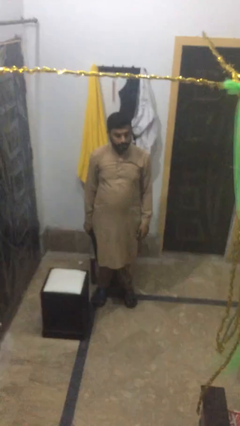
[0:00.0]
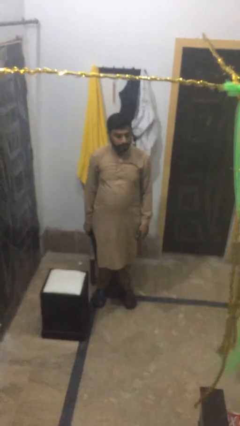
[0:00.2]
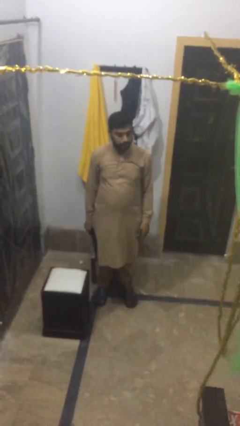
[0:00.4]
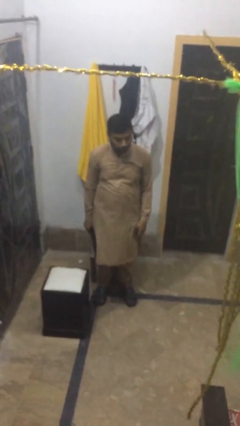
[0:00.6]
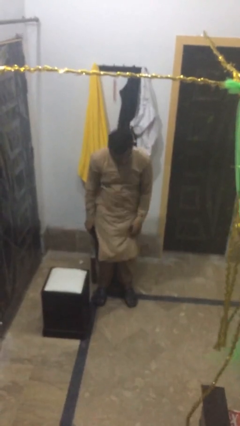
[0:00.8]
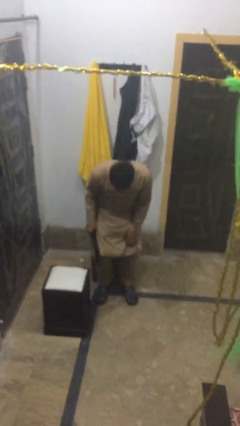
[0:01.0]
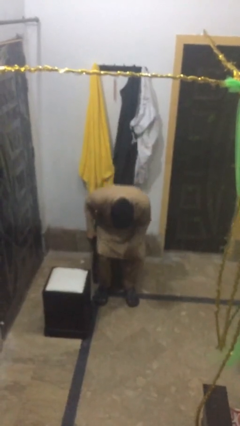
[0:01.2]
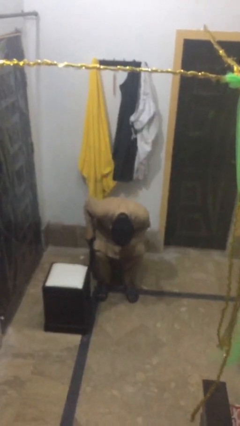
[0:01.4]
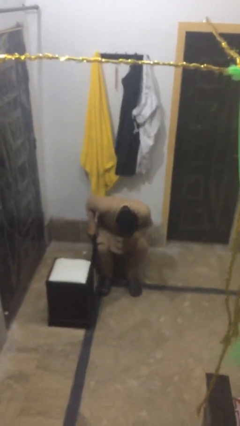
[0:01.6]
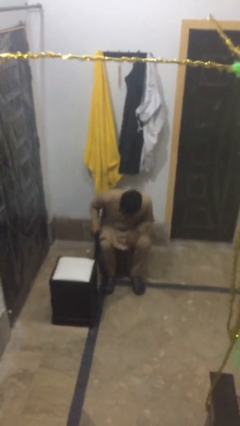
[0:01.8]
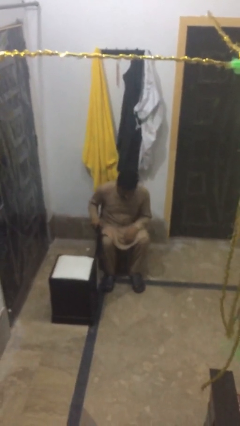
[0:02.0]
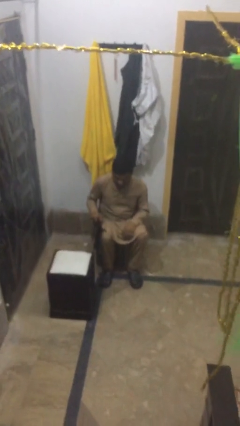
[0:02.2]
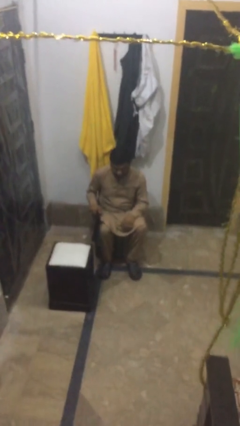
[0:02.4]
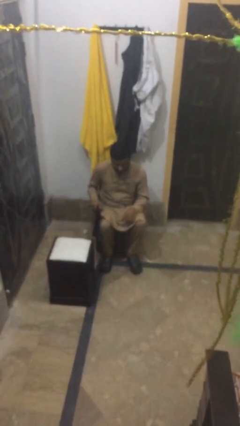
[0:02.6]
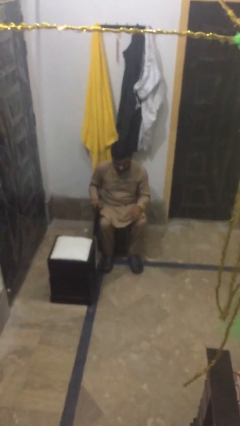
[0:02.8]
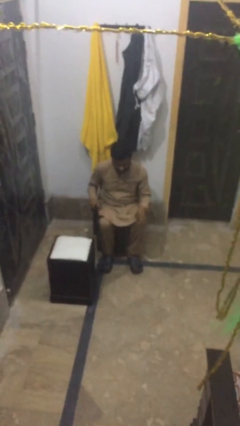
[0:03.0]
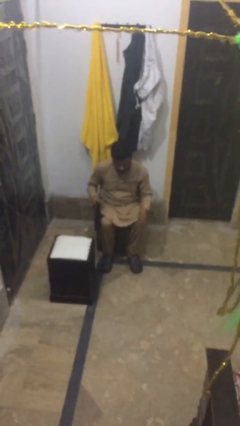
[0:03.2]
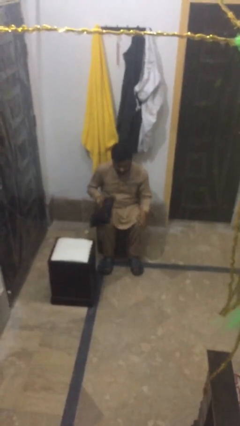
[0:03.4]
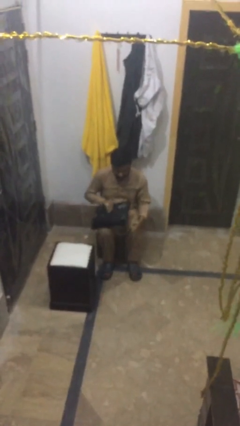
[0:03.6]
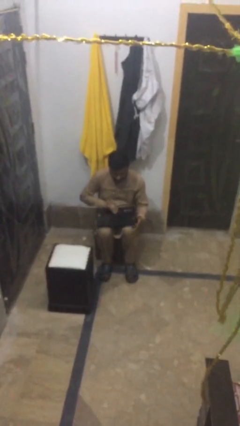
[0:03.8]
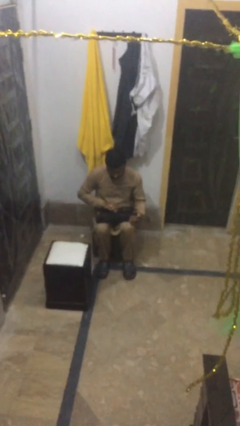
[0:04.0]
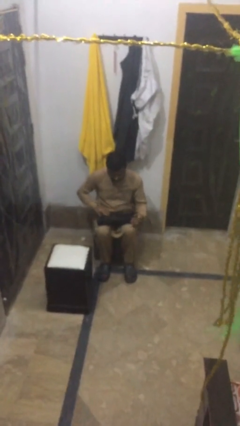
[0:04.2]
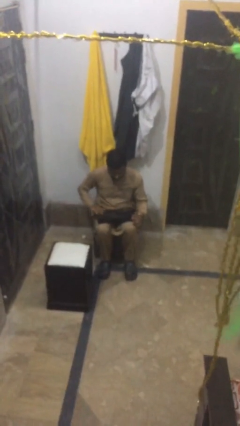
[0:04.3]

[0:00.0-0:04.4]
person sits down

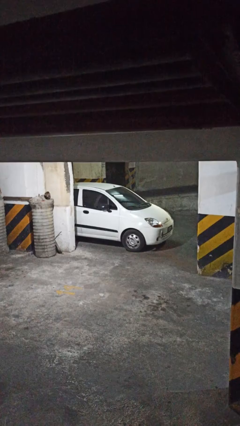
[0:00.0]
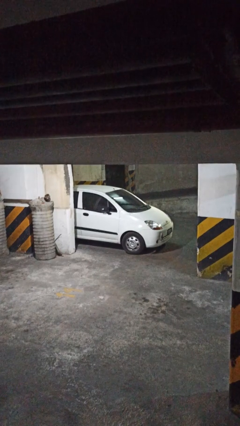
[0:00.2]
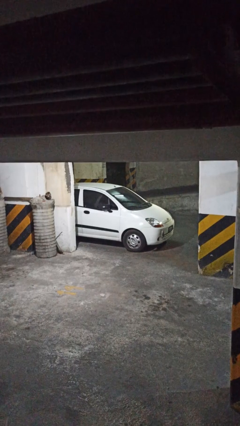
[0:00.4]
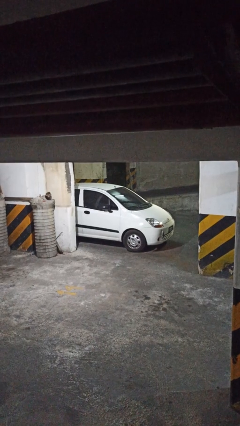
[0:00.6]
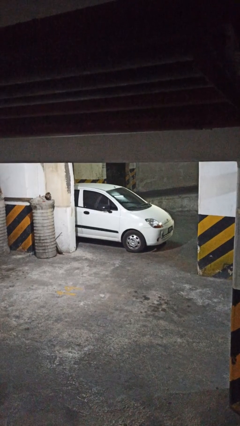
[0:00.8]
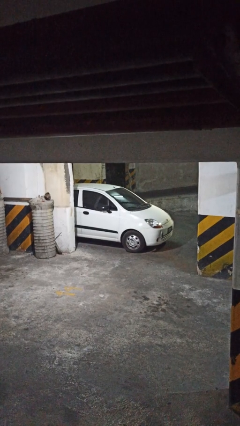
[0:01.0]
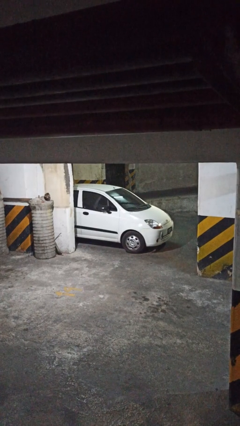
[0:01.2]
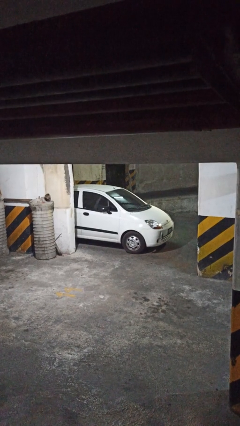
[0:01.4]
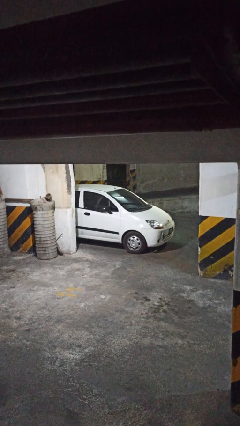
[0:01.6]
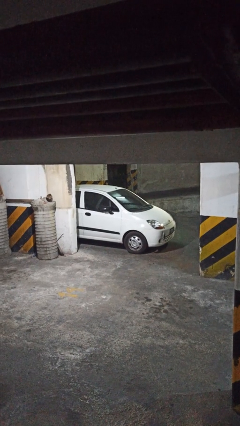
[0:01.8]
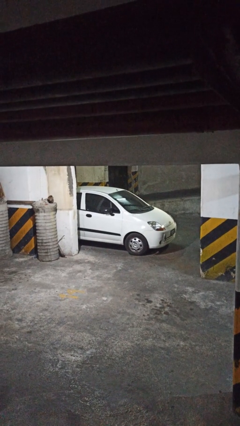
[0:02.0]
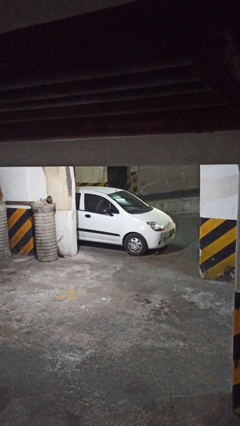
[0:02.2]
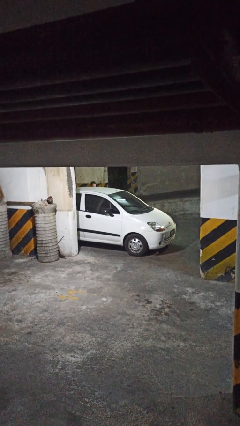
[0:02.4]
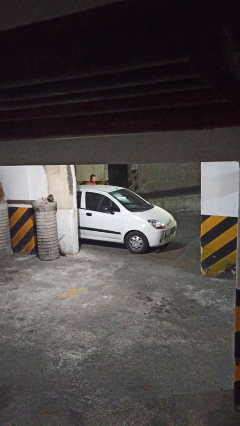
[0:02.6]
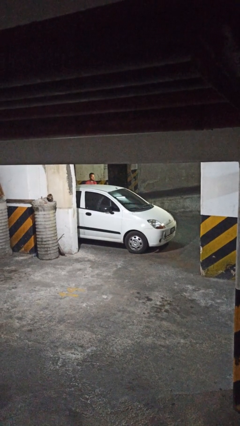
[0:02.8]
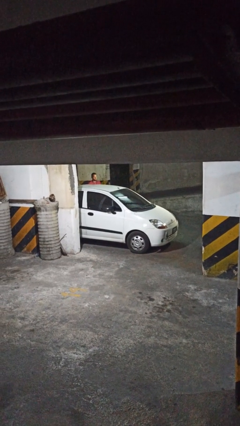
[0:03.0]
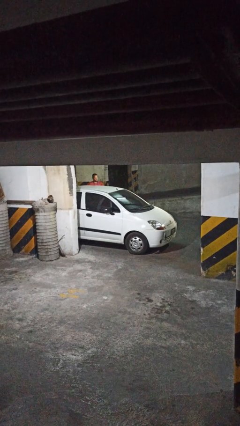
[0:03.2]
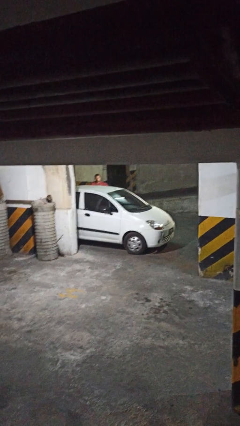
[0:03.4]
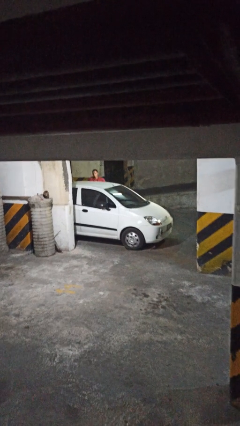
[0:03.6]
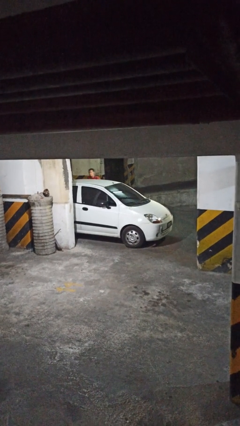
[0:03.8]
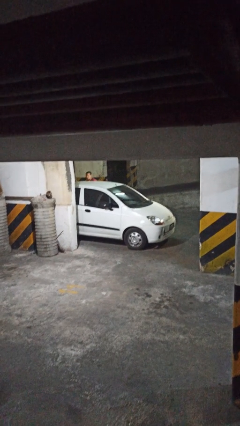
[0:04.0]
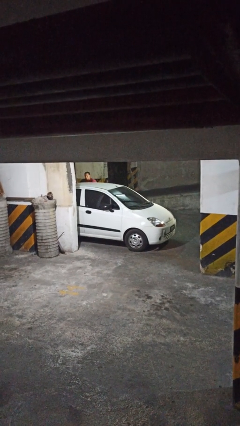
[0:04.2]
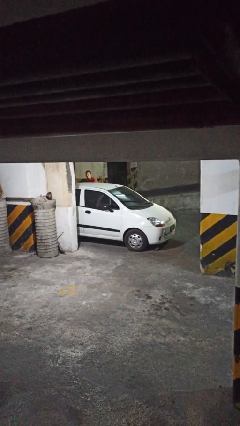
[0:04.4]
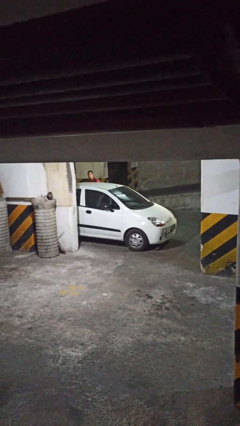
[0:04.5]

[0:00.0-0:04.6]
car drops off person

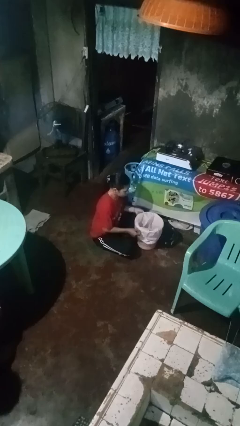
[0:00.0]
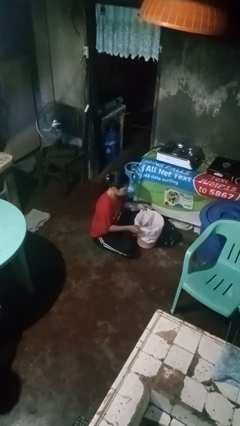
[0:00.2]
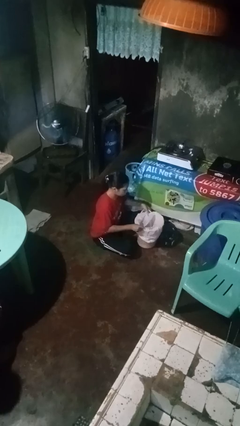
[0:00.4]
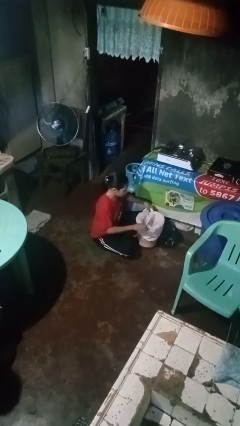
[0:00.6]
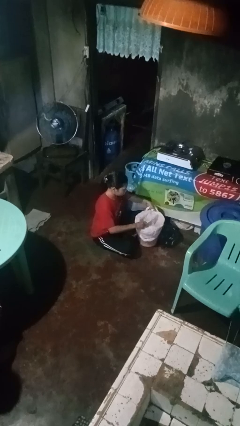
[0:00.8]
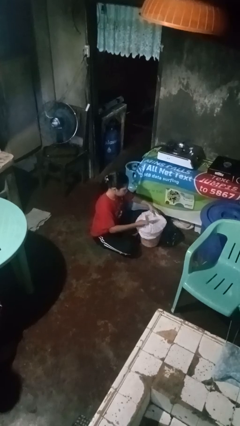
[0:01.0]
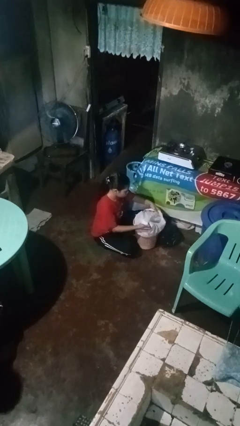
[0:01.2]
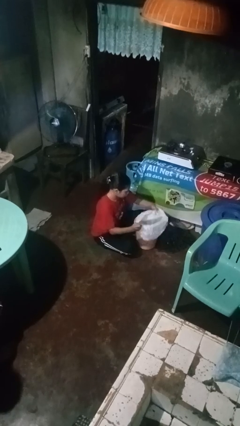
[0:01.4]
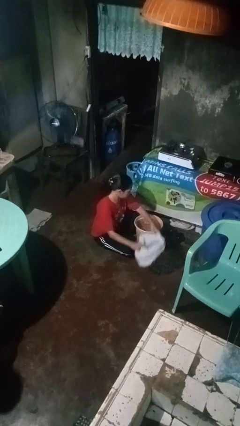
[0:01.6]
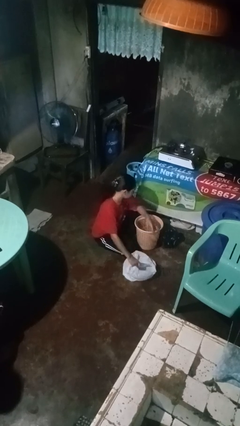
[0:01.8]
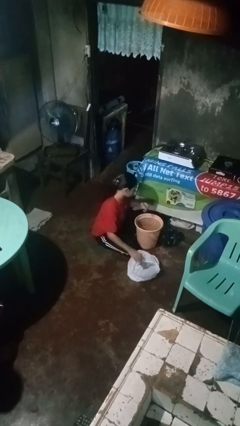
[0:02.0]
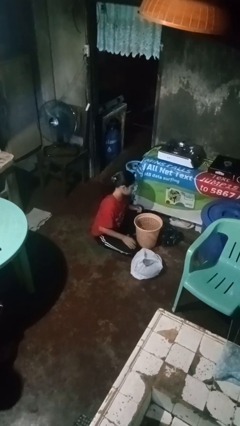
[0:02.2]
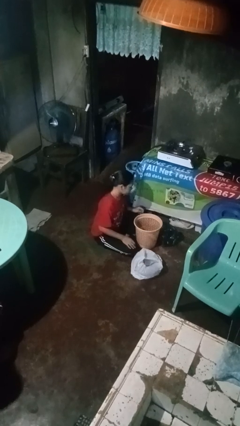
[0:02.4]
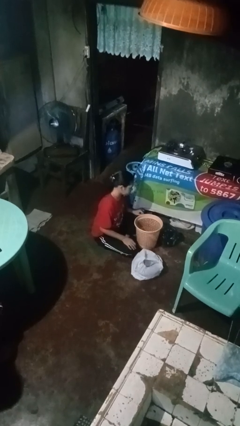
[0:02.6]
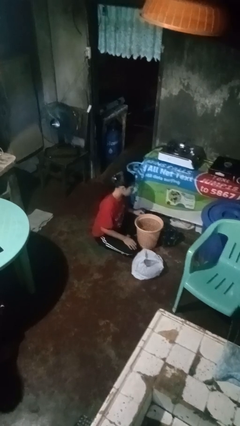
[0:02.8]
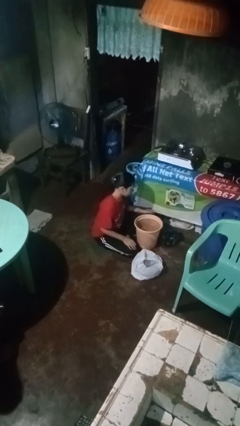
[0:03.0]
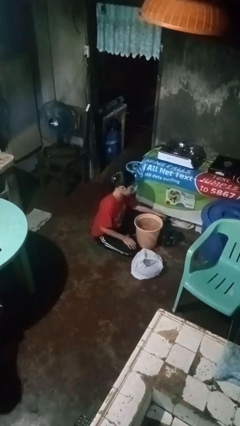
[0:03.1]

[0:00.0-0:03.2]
person removes trashbag from trashcan

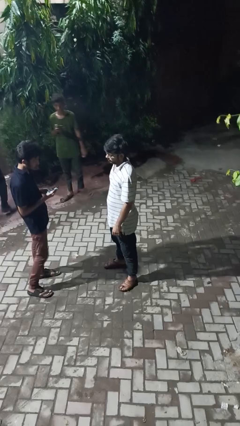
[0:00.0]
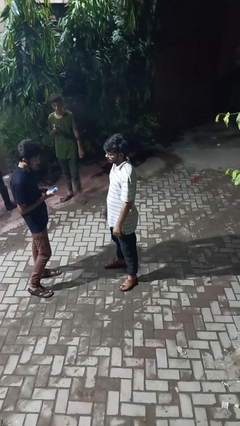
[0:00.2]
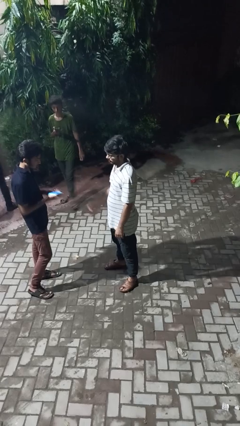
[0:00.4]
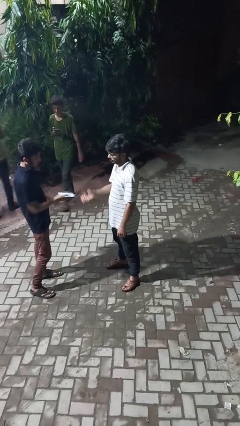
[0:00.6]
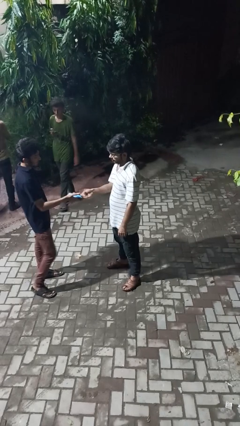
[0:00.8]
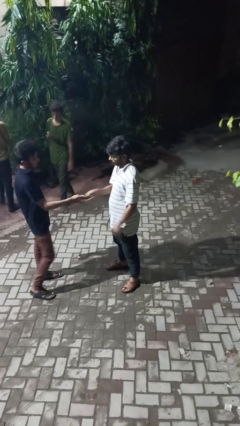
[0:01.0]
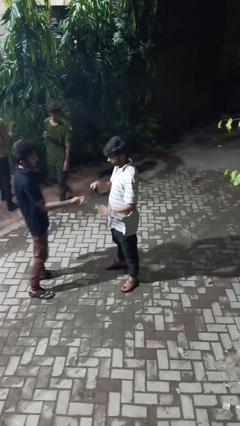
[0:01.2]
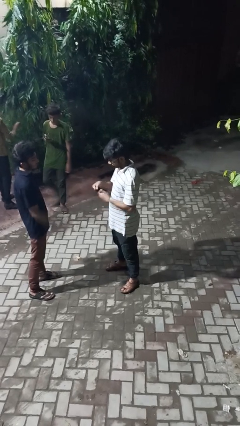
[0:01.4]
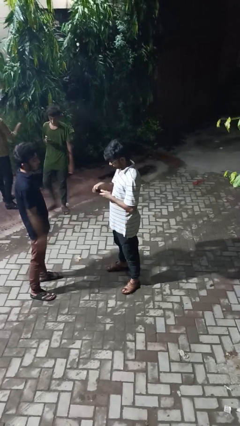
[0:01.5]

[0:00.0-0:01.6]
person transfers object to person

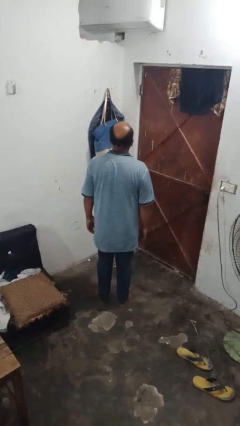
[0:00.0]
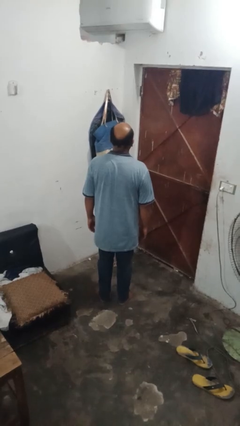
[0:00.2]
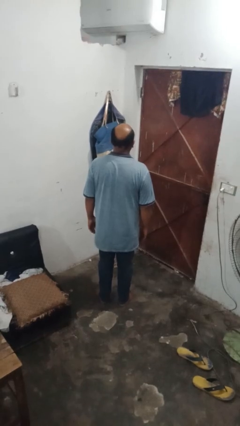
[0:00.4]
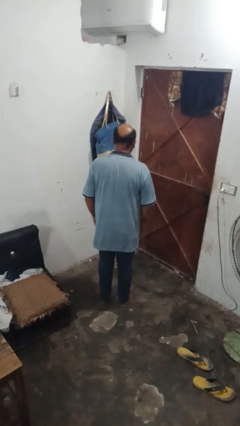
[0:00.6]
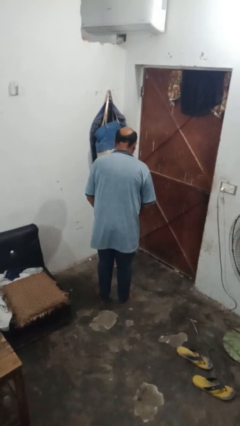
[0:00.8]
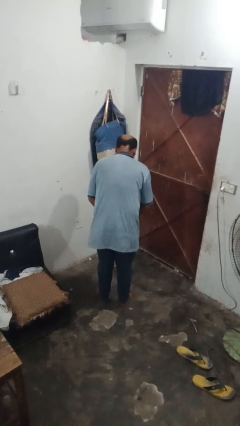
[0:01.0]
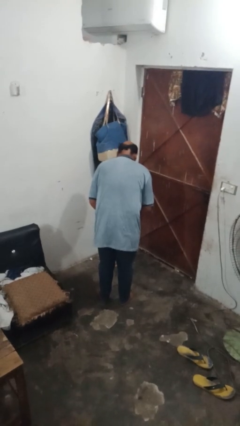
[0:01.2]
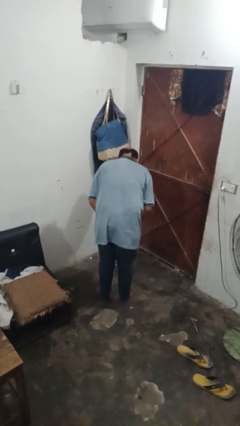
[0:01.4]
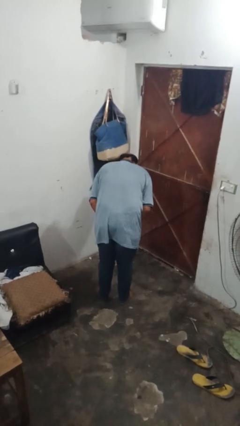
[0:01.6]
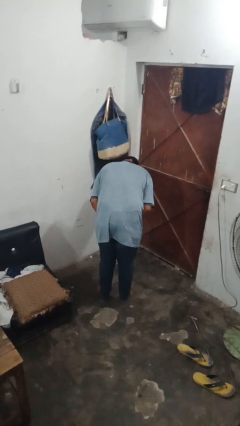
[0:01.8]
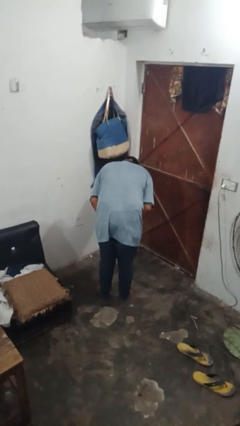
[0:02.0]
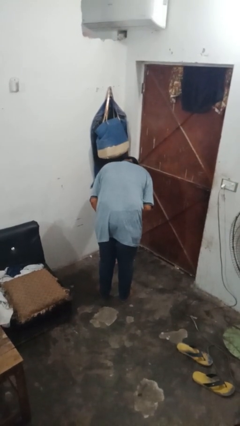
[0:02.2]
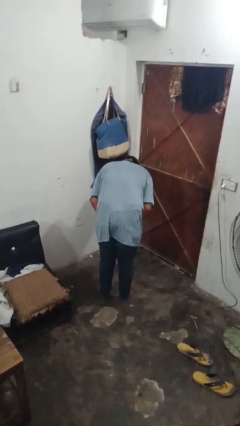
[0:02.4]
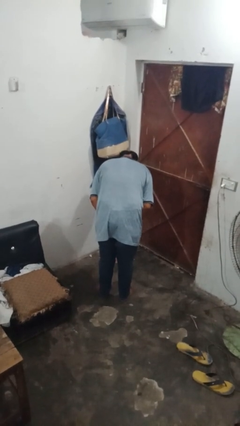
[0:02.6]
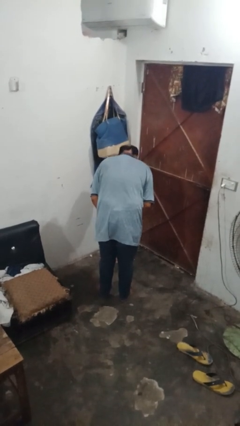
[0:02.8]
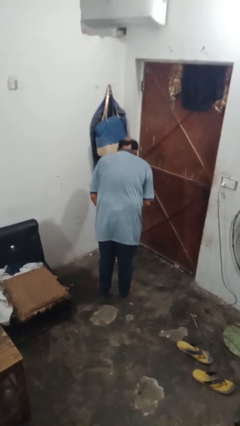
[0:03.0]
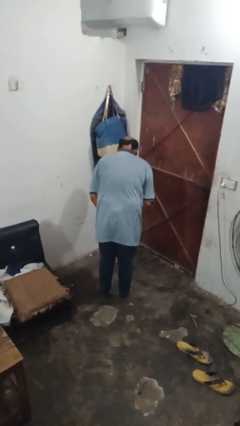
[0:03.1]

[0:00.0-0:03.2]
person bows

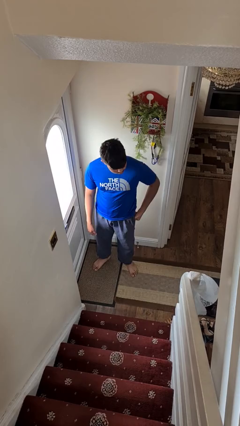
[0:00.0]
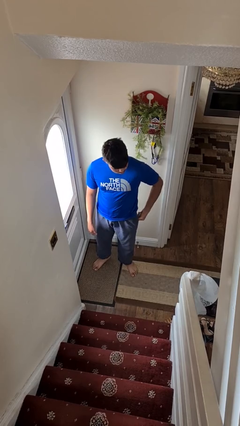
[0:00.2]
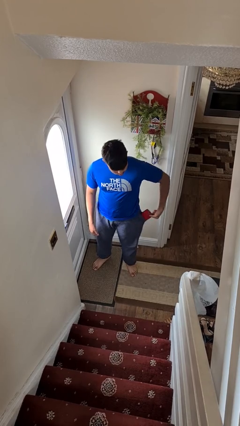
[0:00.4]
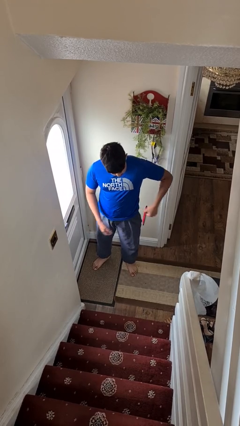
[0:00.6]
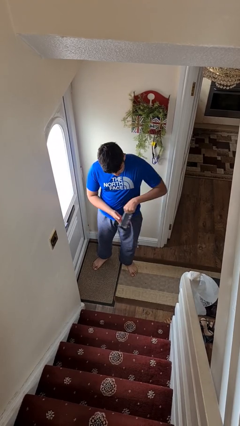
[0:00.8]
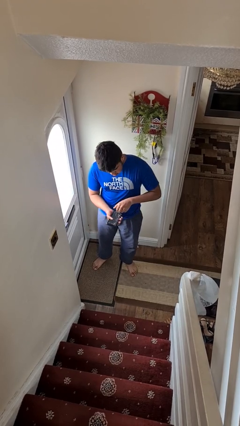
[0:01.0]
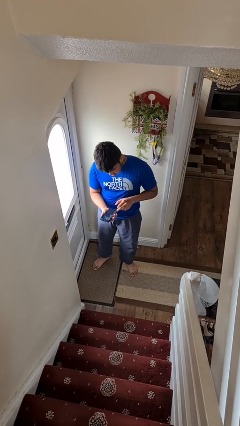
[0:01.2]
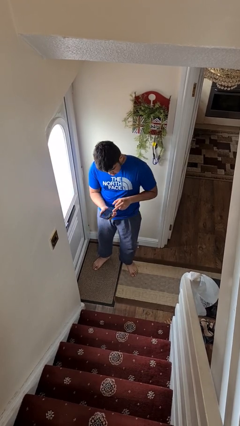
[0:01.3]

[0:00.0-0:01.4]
person takes phone from pocket
